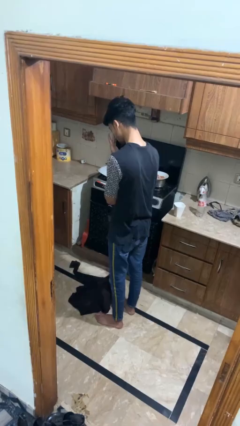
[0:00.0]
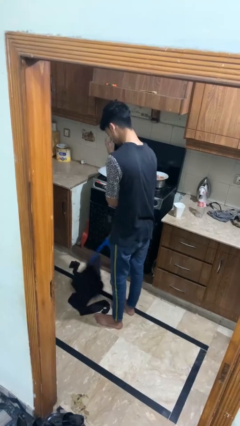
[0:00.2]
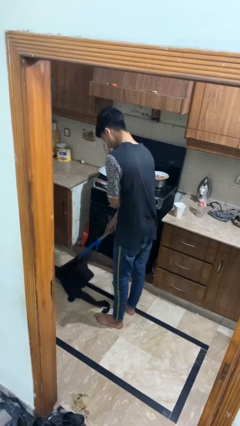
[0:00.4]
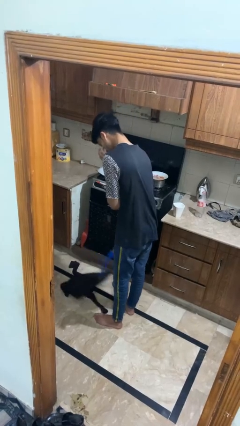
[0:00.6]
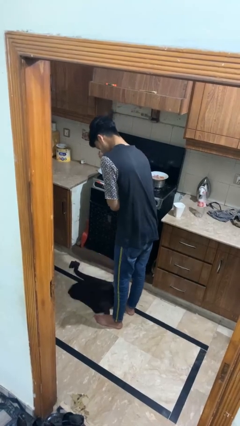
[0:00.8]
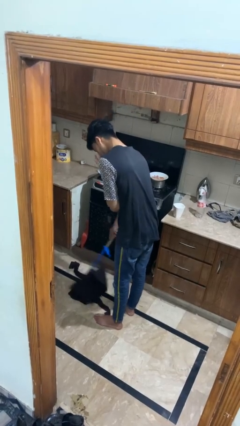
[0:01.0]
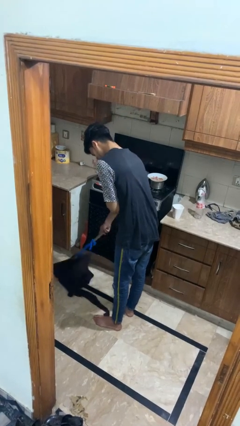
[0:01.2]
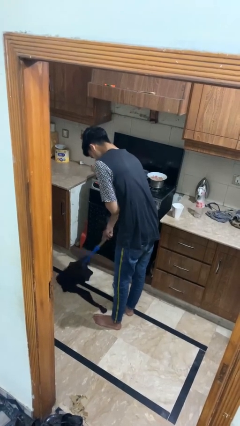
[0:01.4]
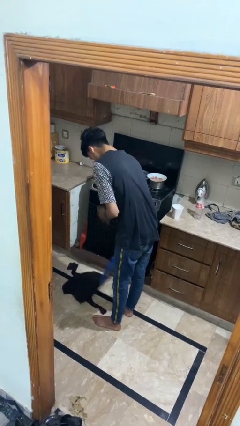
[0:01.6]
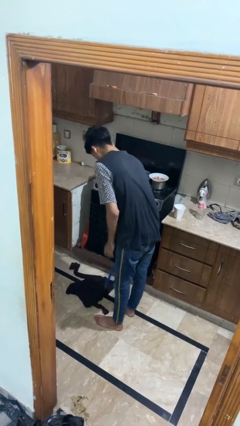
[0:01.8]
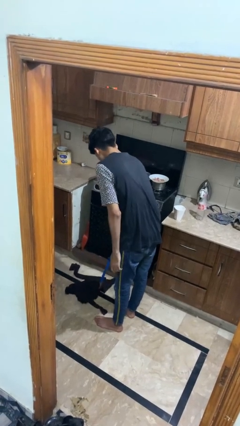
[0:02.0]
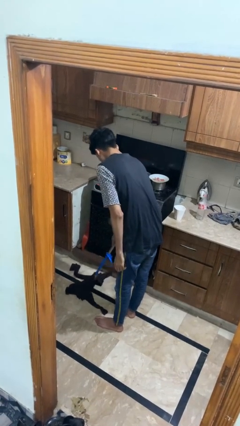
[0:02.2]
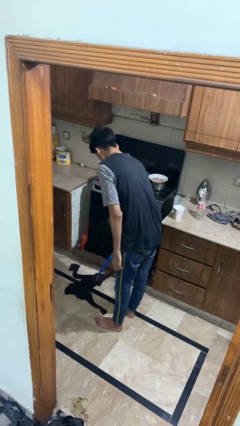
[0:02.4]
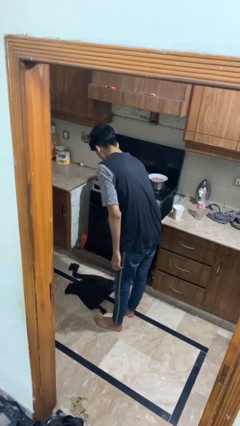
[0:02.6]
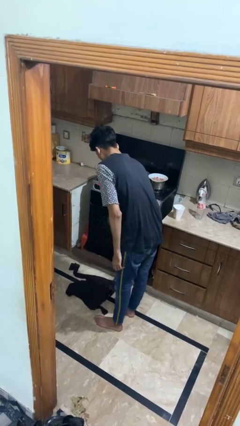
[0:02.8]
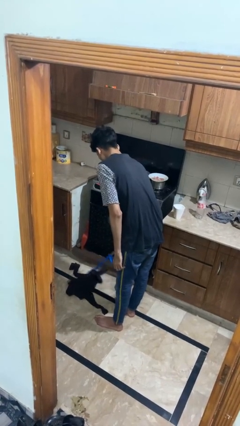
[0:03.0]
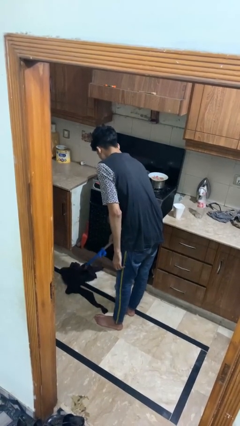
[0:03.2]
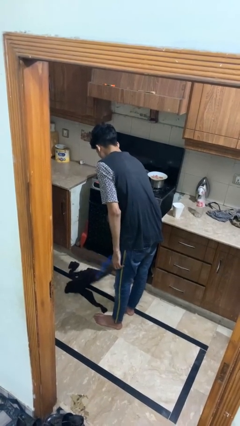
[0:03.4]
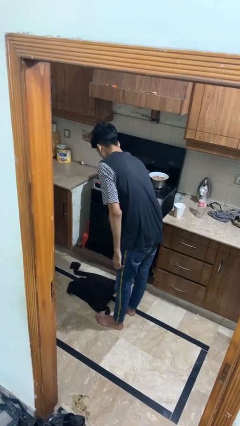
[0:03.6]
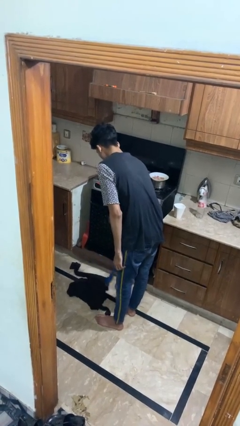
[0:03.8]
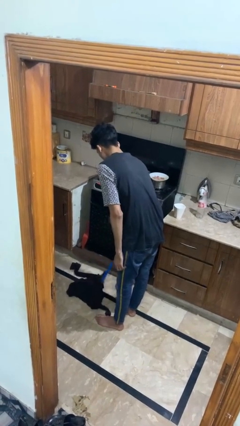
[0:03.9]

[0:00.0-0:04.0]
person mops

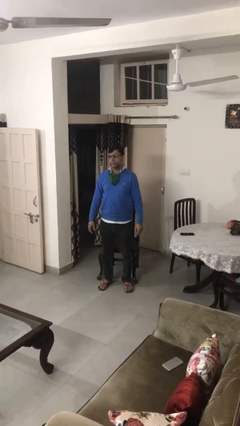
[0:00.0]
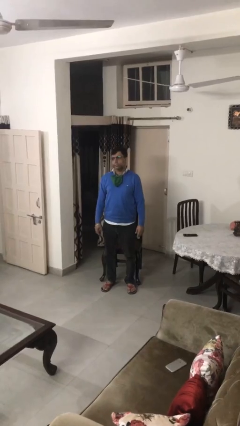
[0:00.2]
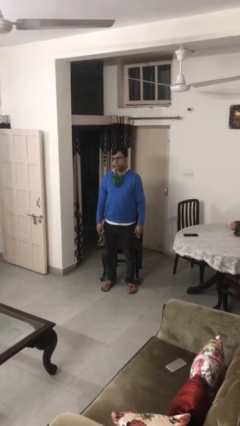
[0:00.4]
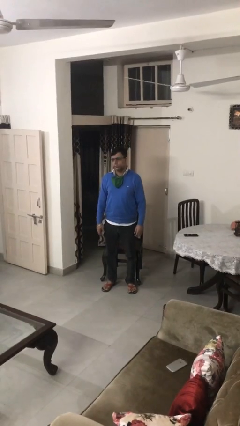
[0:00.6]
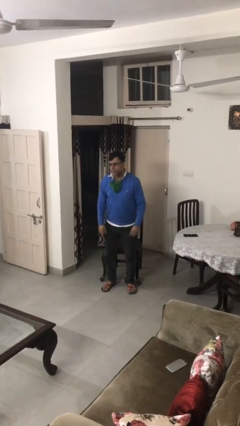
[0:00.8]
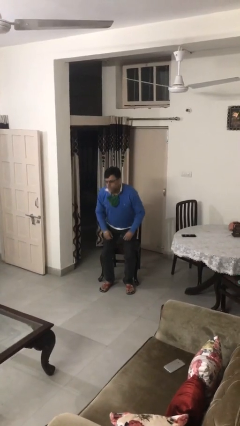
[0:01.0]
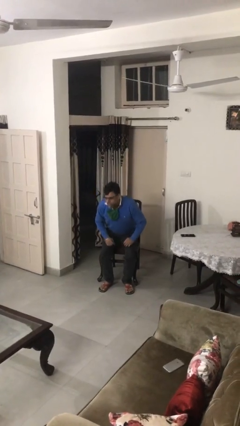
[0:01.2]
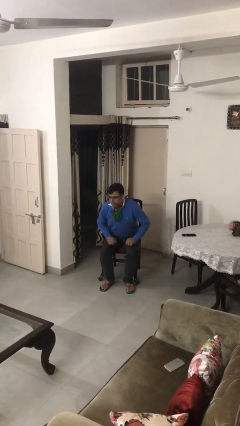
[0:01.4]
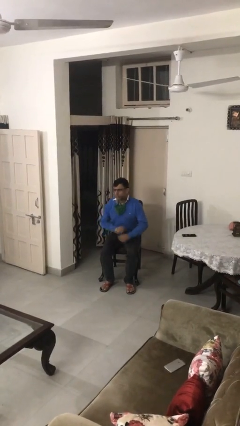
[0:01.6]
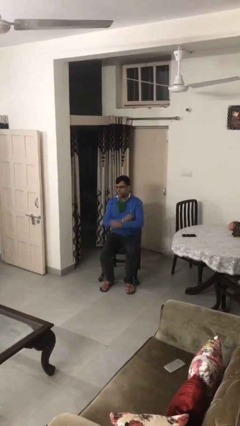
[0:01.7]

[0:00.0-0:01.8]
person sits down

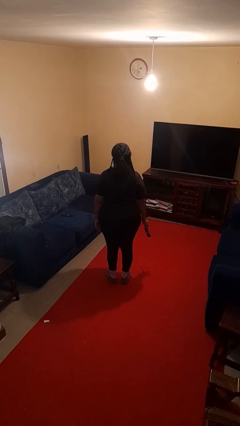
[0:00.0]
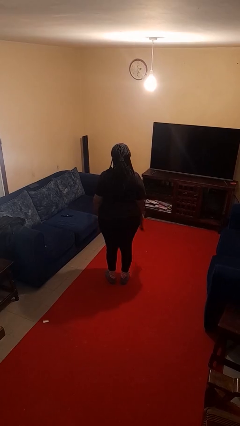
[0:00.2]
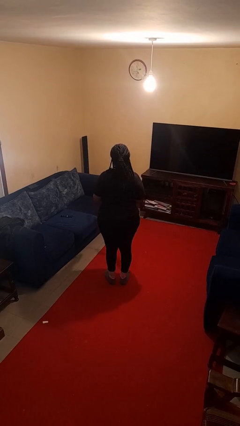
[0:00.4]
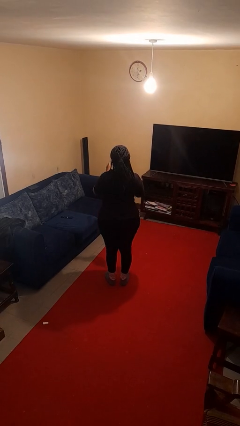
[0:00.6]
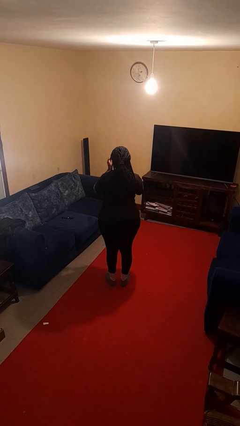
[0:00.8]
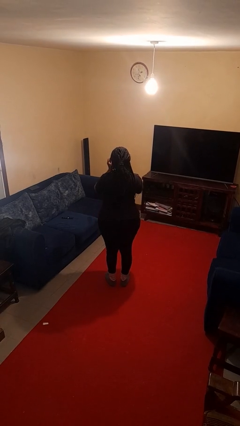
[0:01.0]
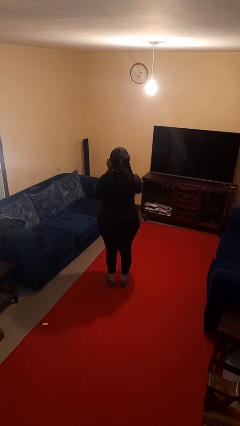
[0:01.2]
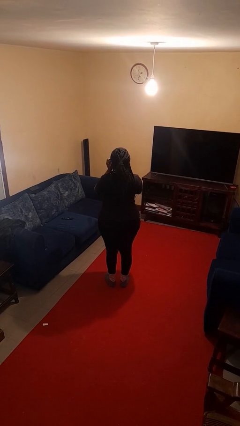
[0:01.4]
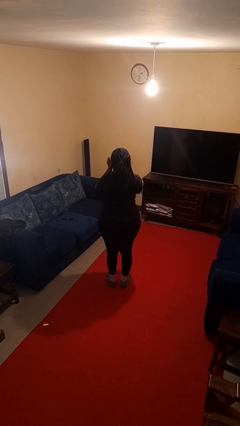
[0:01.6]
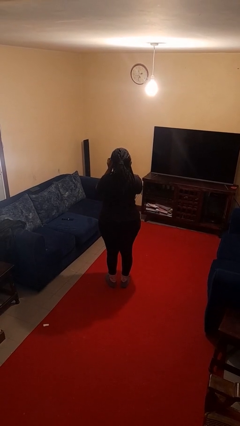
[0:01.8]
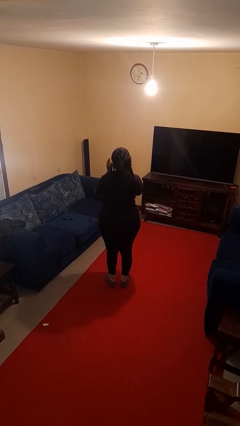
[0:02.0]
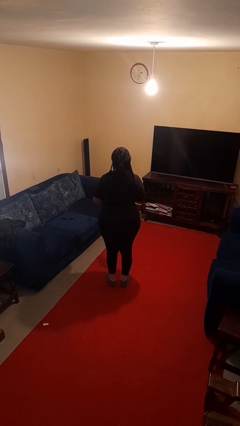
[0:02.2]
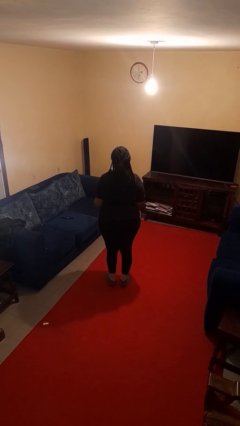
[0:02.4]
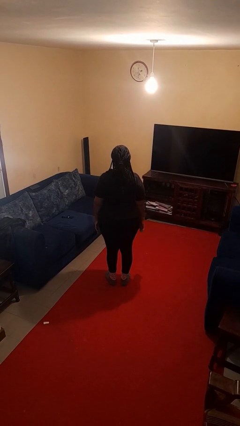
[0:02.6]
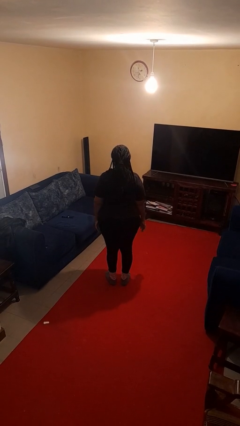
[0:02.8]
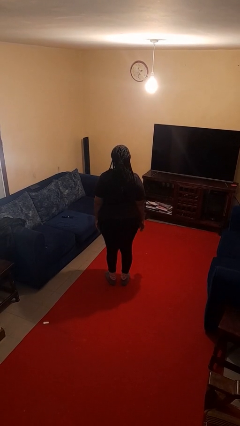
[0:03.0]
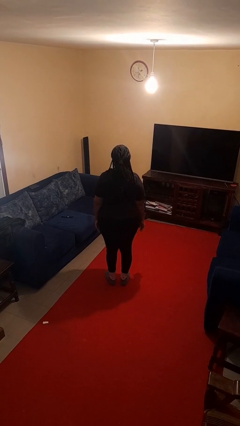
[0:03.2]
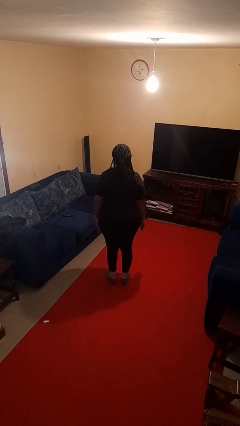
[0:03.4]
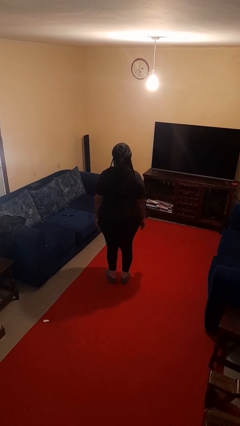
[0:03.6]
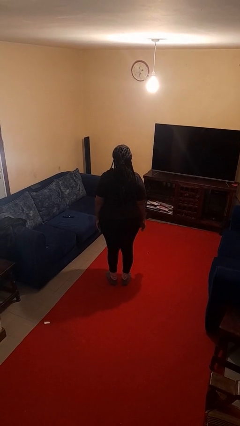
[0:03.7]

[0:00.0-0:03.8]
person puts on sunglasses

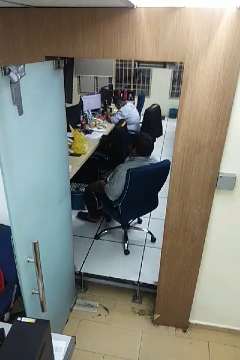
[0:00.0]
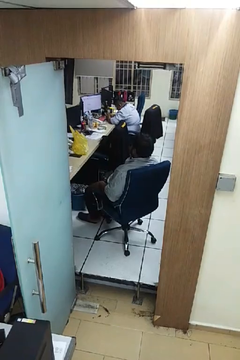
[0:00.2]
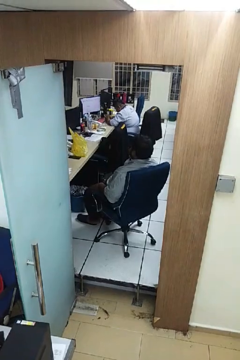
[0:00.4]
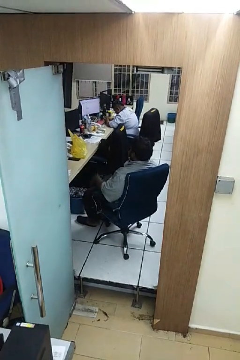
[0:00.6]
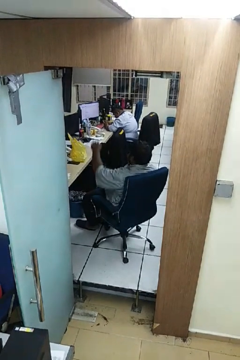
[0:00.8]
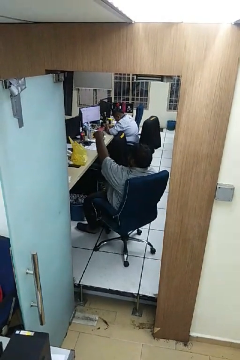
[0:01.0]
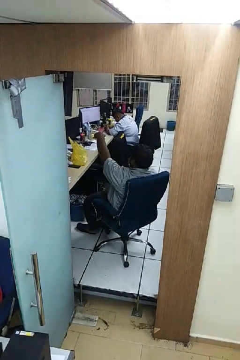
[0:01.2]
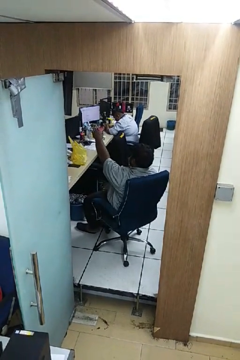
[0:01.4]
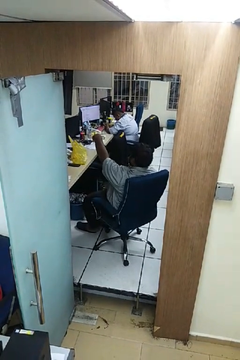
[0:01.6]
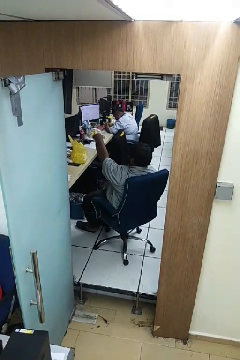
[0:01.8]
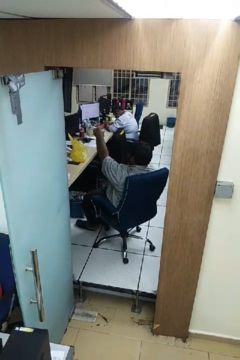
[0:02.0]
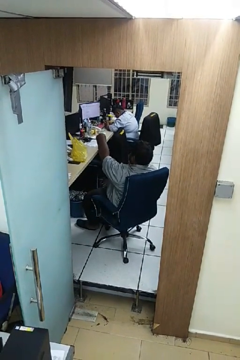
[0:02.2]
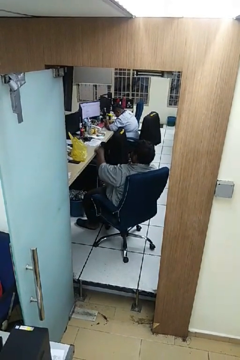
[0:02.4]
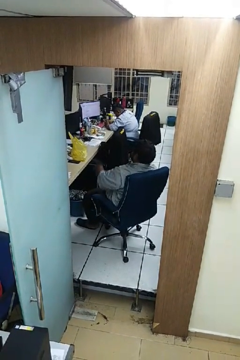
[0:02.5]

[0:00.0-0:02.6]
person gestures come here

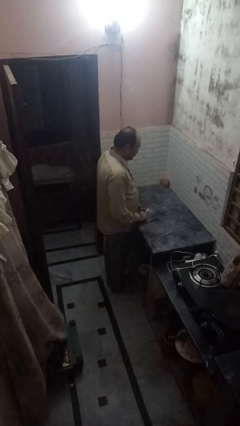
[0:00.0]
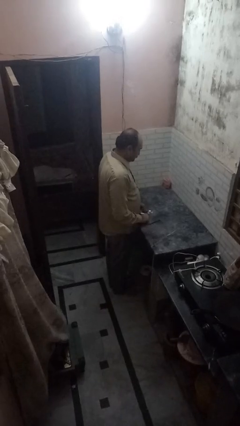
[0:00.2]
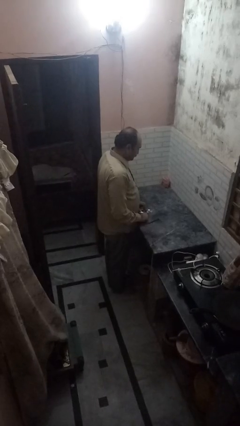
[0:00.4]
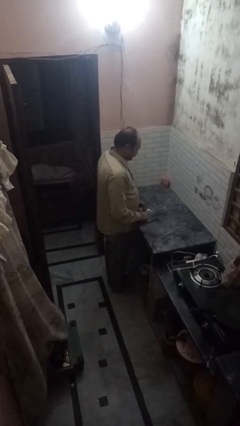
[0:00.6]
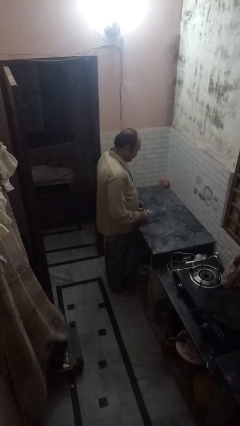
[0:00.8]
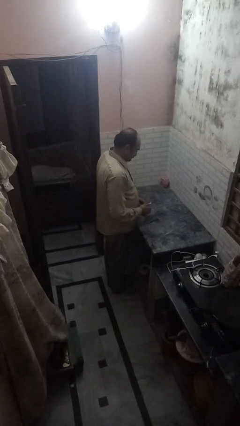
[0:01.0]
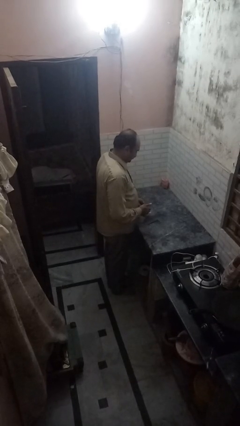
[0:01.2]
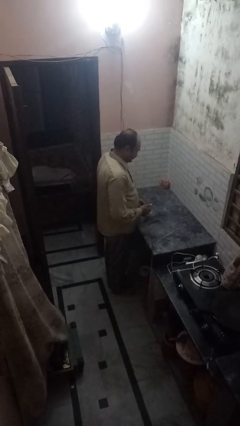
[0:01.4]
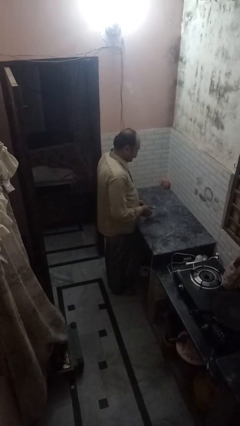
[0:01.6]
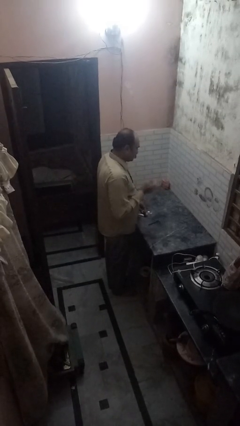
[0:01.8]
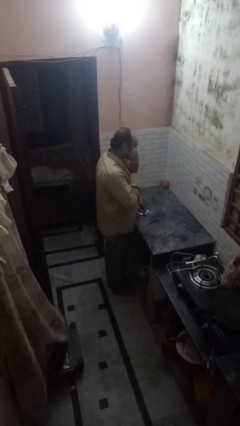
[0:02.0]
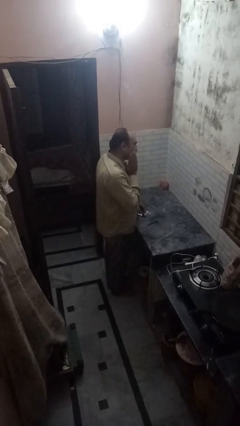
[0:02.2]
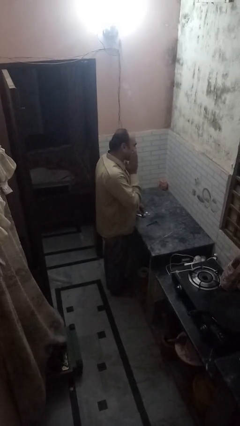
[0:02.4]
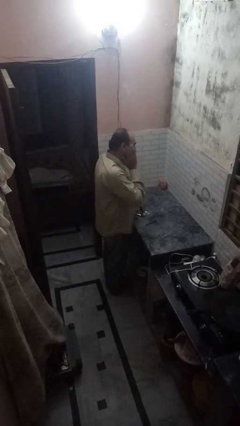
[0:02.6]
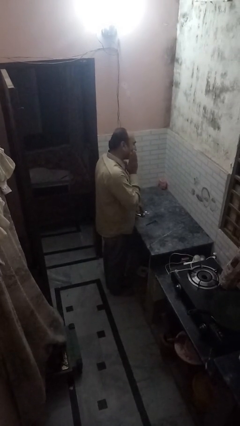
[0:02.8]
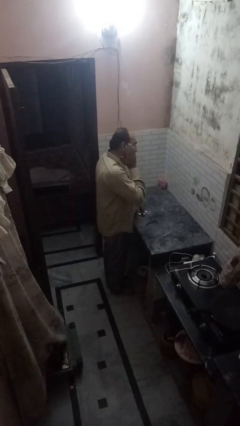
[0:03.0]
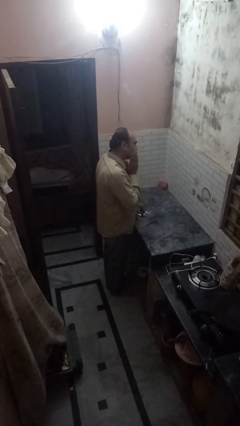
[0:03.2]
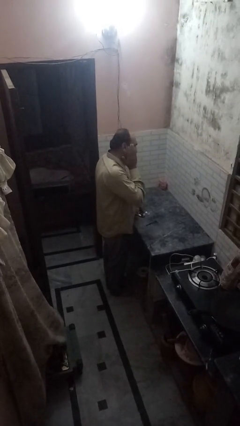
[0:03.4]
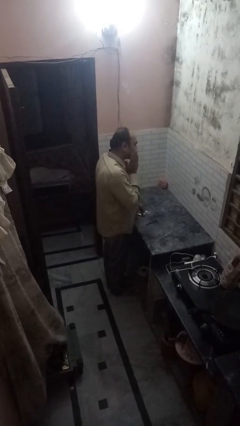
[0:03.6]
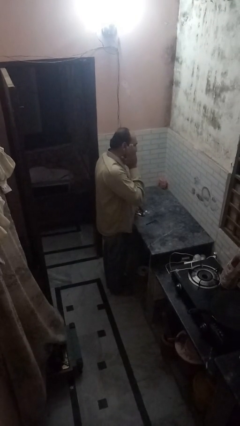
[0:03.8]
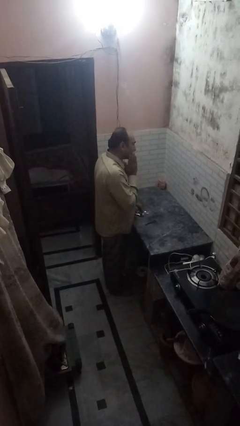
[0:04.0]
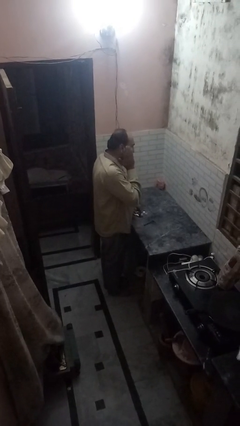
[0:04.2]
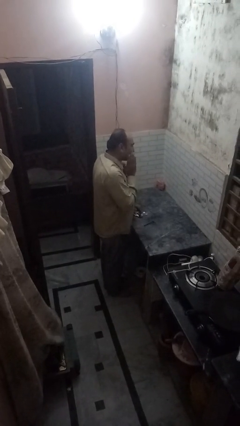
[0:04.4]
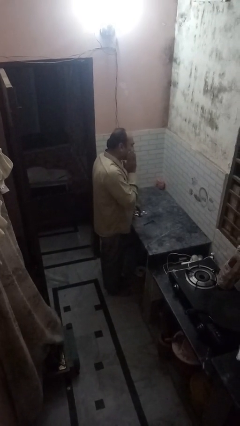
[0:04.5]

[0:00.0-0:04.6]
person applies shaving cream

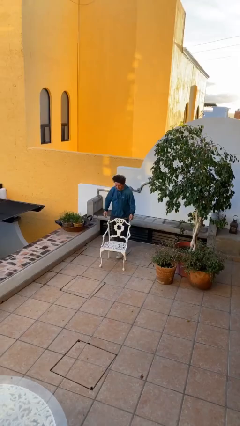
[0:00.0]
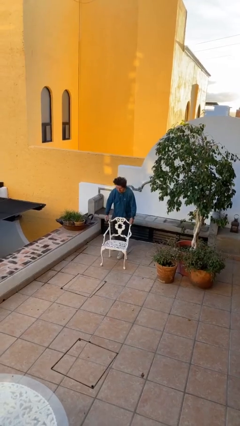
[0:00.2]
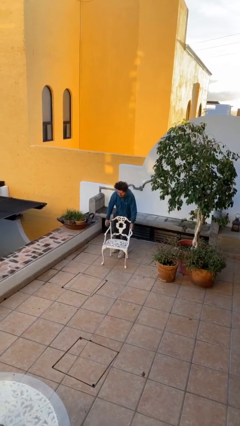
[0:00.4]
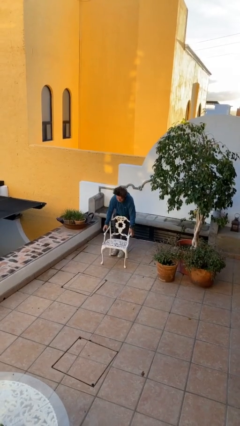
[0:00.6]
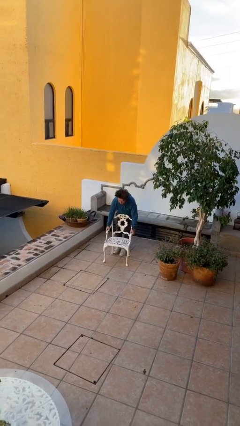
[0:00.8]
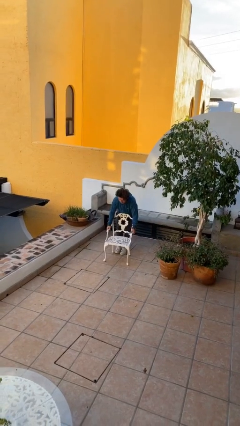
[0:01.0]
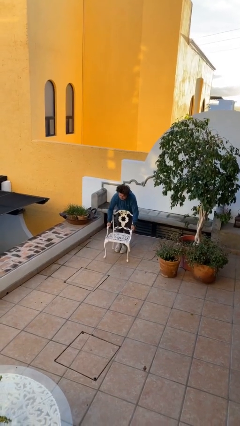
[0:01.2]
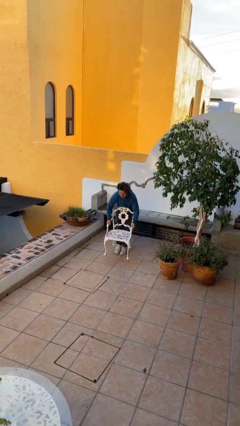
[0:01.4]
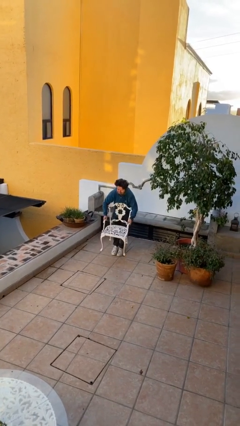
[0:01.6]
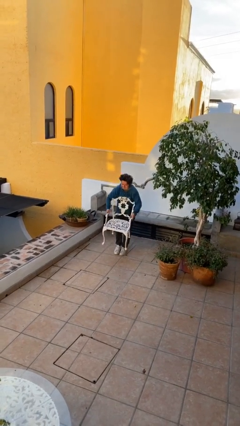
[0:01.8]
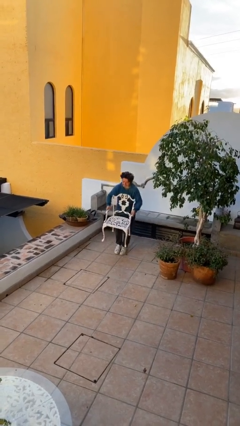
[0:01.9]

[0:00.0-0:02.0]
person picks up object from floor
